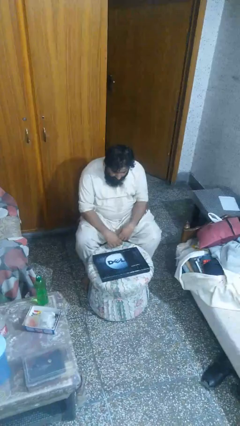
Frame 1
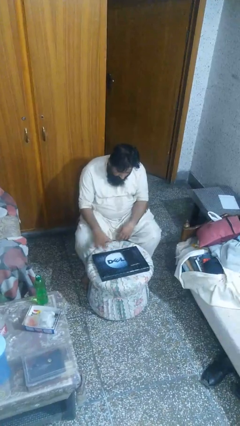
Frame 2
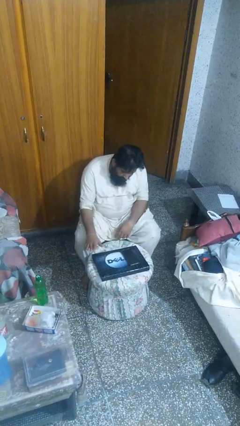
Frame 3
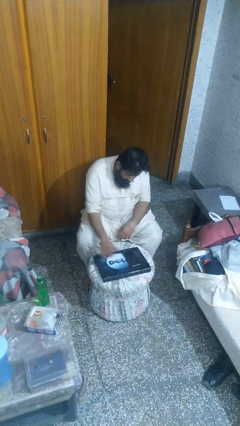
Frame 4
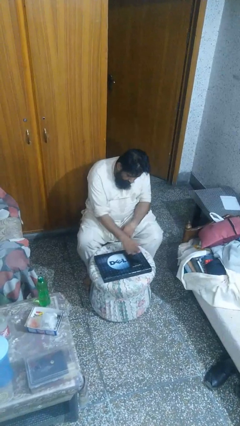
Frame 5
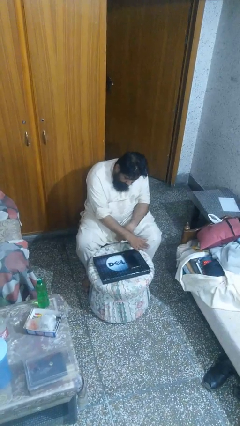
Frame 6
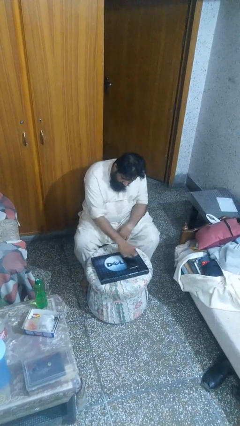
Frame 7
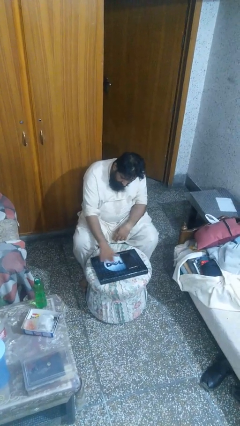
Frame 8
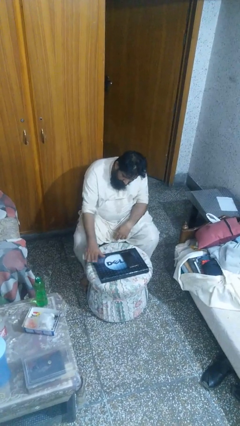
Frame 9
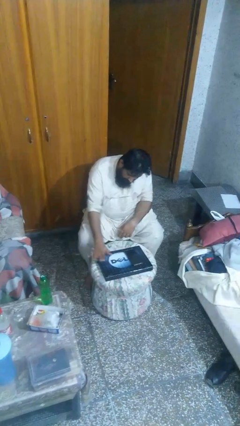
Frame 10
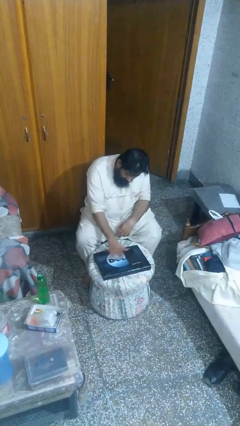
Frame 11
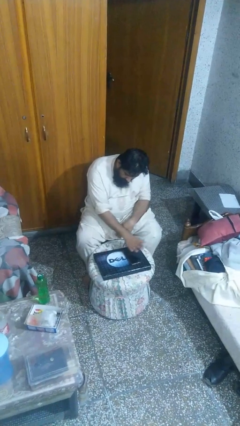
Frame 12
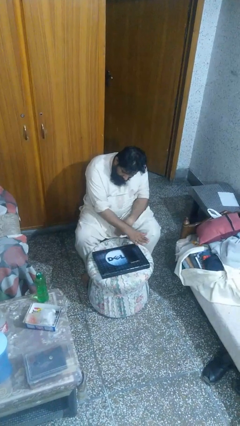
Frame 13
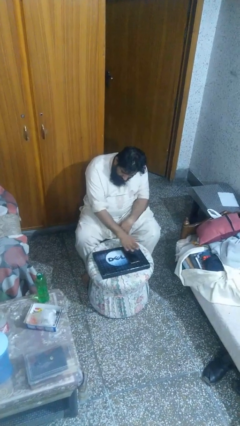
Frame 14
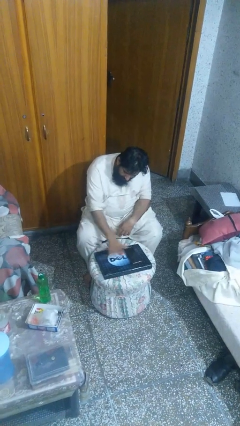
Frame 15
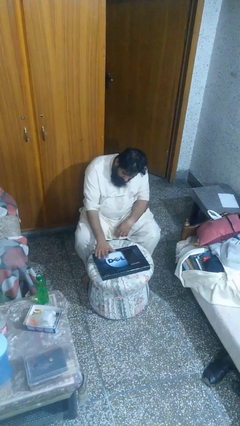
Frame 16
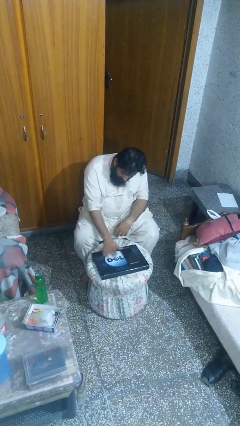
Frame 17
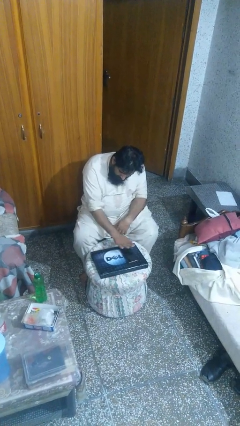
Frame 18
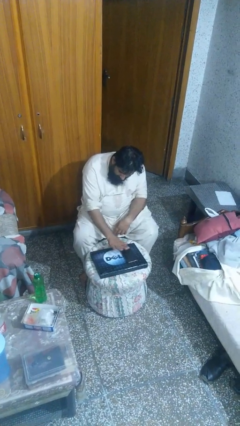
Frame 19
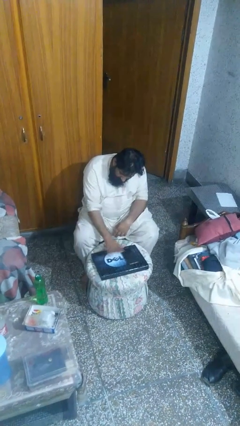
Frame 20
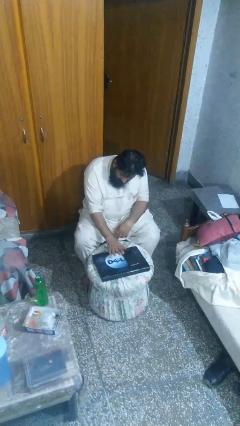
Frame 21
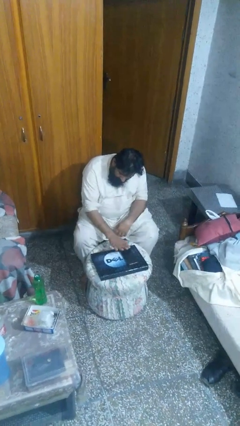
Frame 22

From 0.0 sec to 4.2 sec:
person waves hand over object

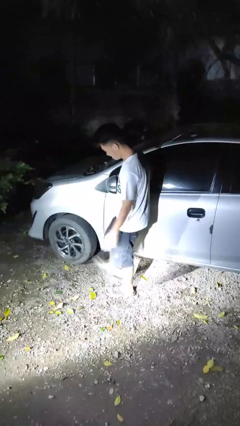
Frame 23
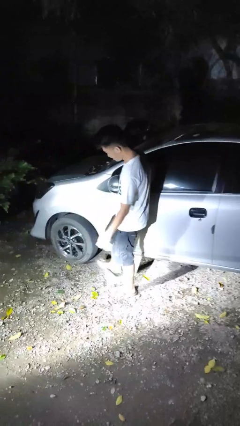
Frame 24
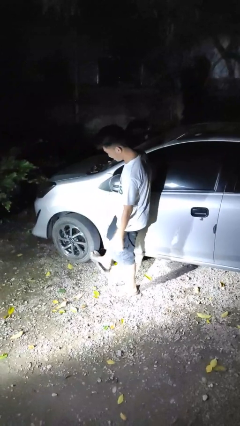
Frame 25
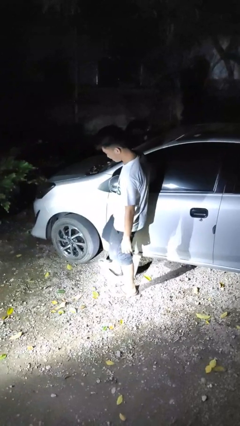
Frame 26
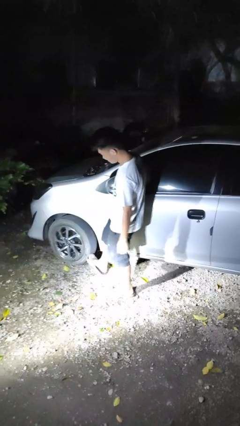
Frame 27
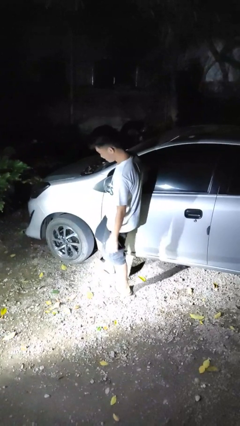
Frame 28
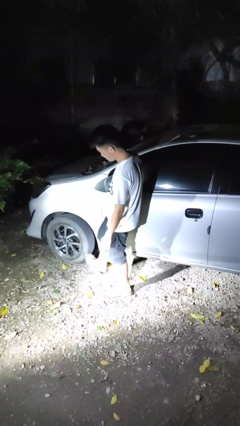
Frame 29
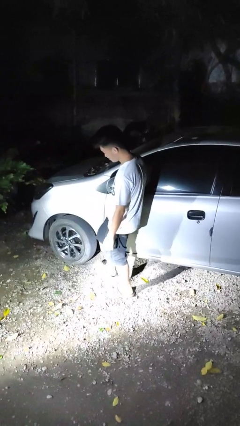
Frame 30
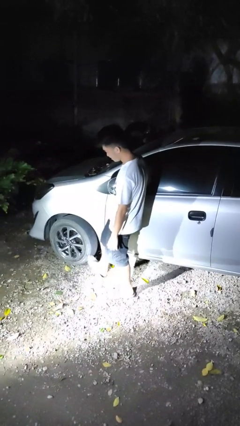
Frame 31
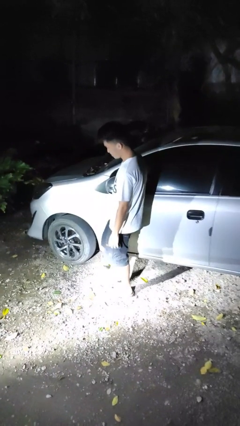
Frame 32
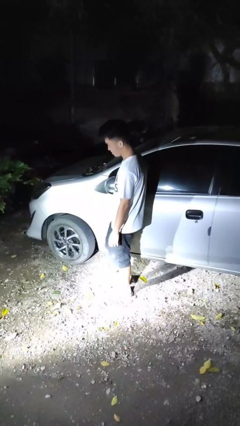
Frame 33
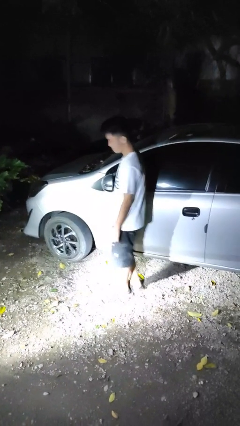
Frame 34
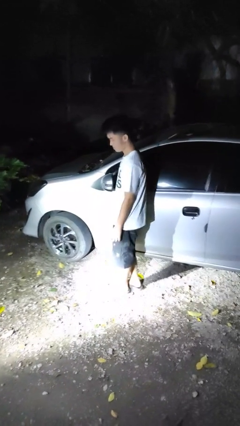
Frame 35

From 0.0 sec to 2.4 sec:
person kicks car tires

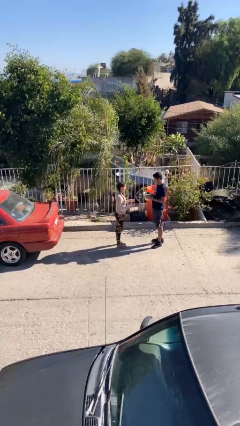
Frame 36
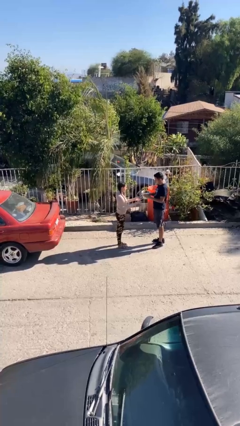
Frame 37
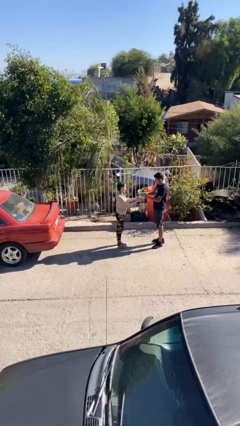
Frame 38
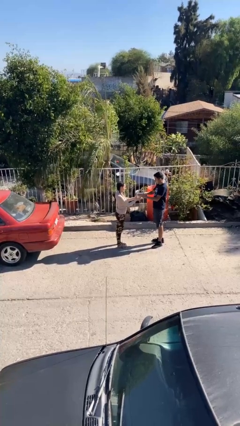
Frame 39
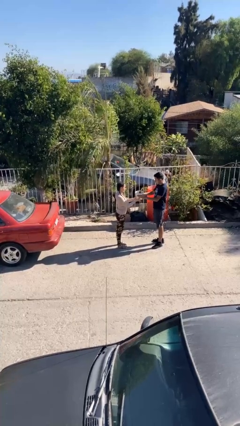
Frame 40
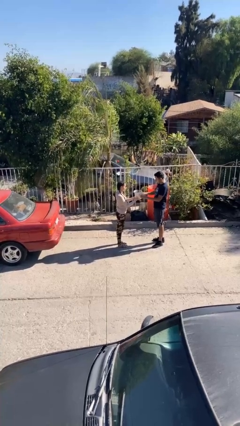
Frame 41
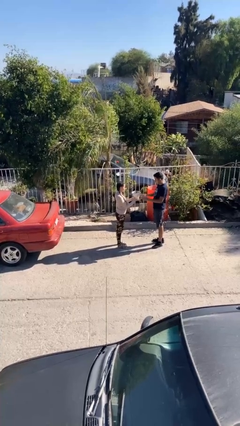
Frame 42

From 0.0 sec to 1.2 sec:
person transfers object to person

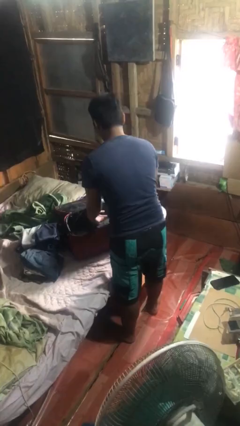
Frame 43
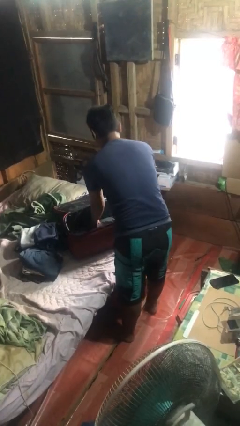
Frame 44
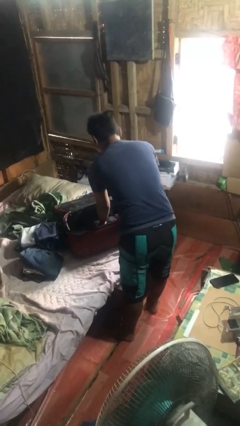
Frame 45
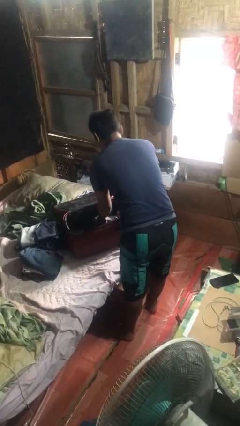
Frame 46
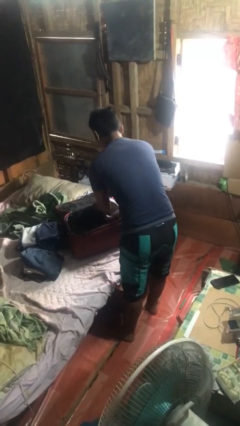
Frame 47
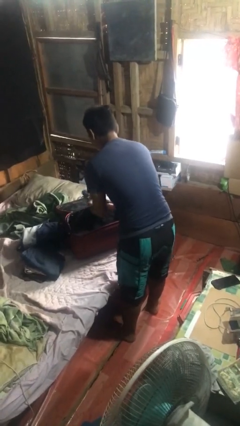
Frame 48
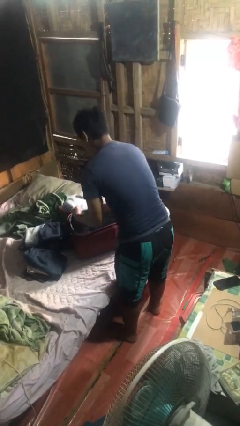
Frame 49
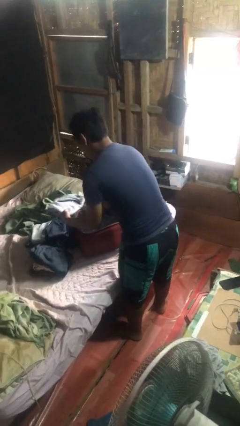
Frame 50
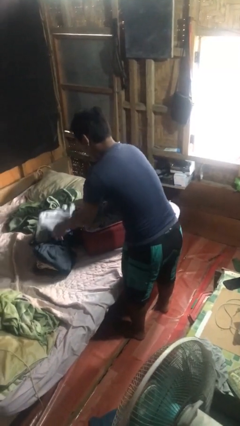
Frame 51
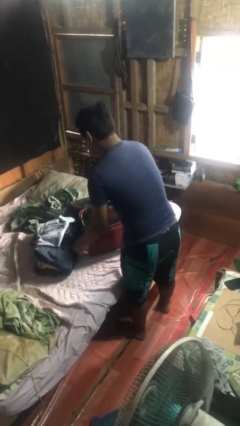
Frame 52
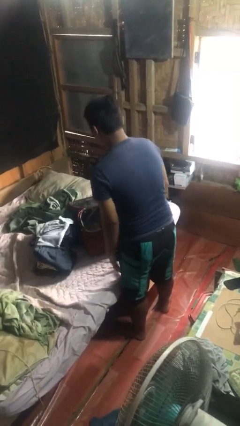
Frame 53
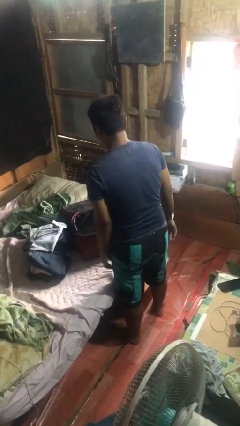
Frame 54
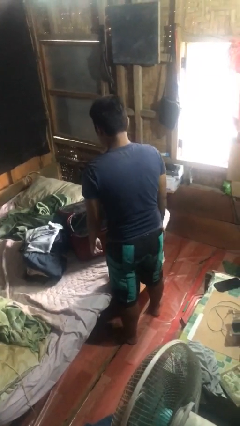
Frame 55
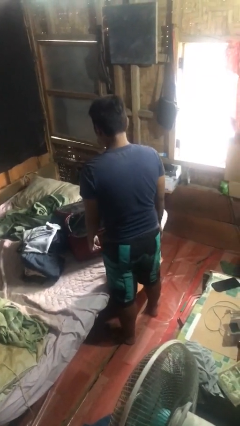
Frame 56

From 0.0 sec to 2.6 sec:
person unloads clothes from suitcase

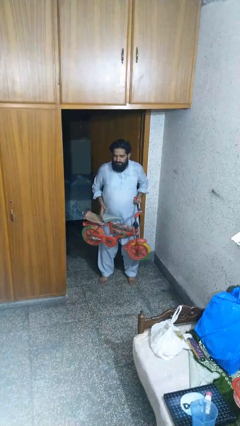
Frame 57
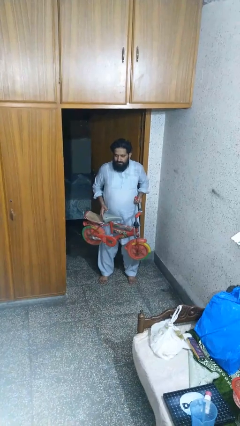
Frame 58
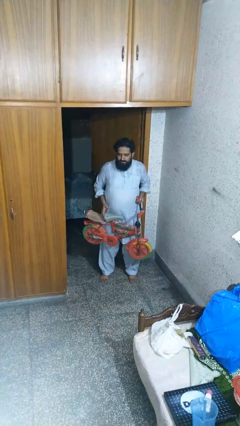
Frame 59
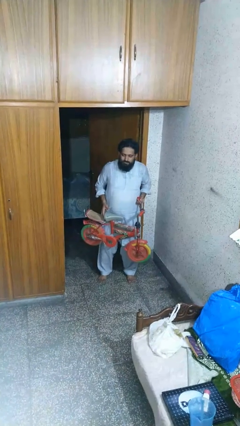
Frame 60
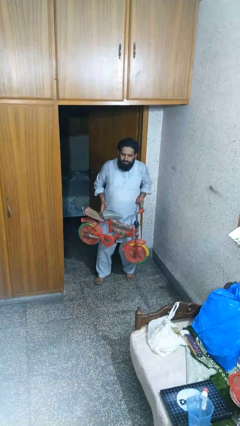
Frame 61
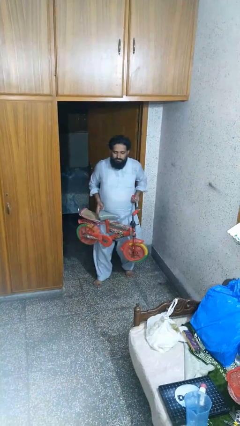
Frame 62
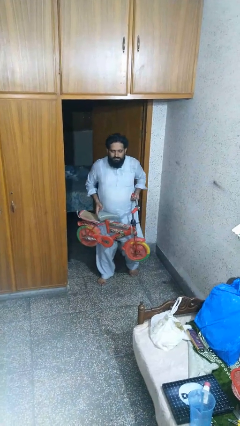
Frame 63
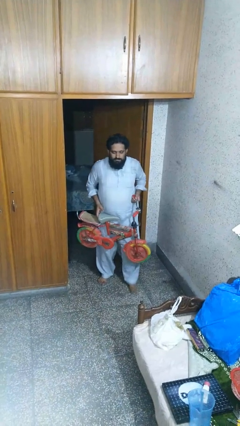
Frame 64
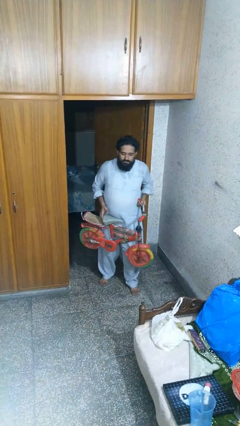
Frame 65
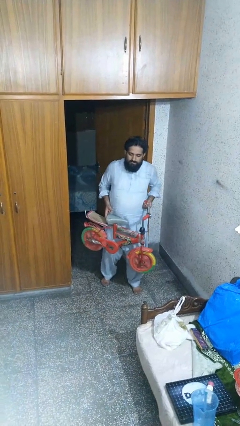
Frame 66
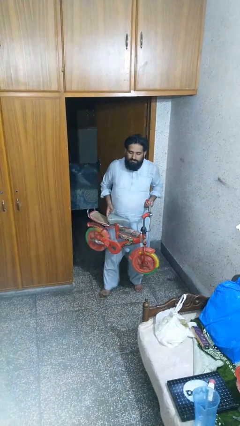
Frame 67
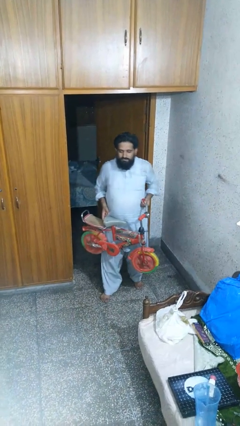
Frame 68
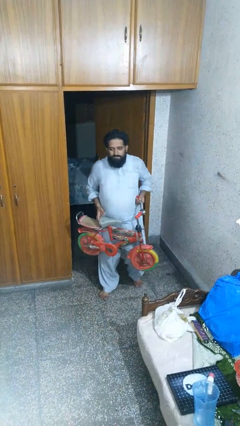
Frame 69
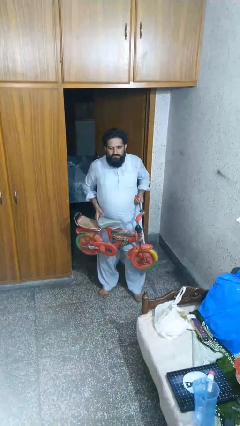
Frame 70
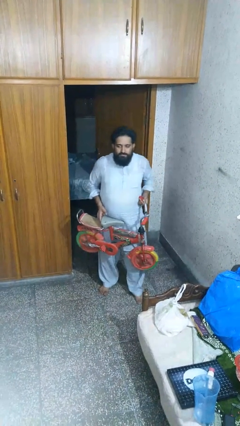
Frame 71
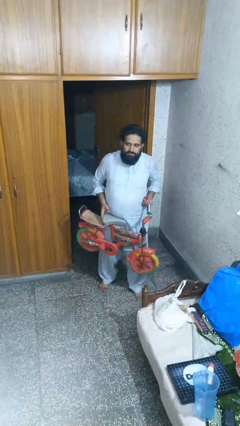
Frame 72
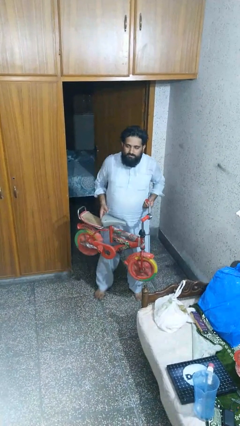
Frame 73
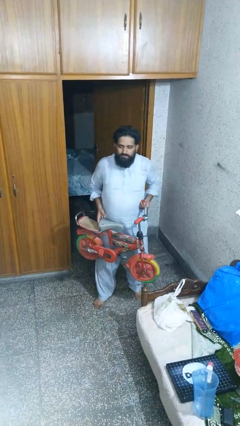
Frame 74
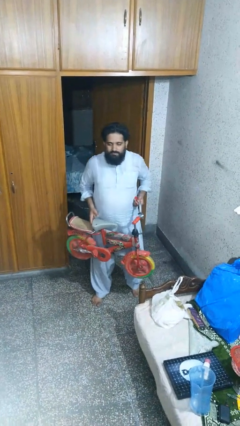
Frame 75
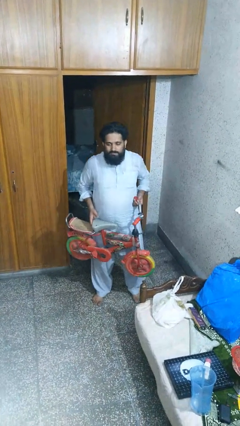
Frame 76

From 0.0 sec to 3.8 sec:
person carries bicycle

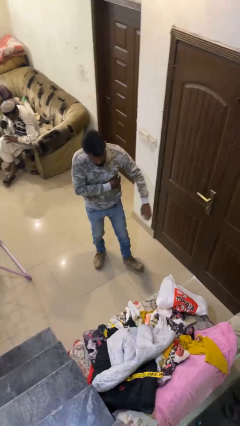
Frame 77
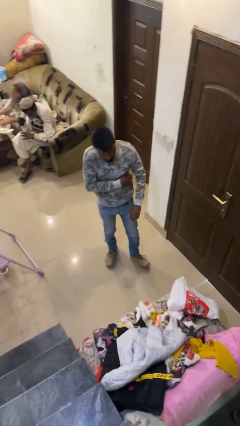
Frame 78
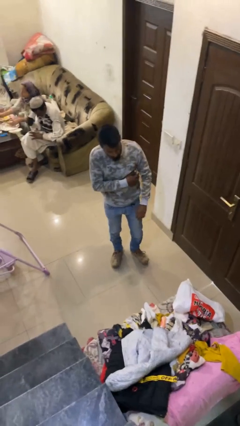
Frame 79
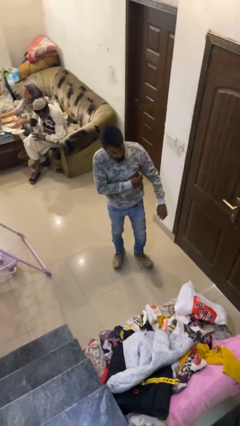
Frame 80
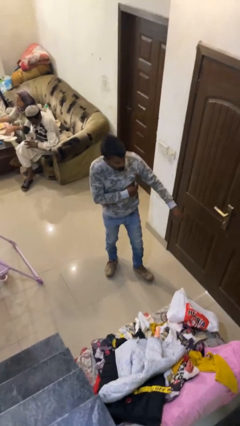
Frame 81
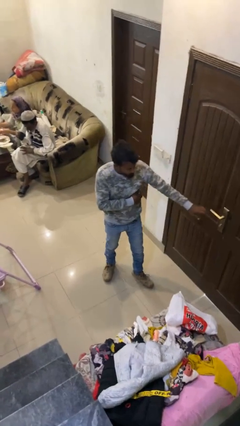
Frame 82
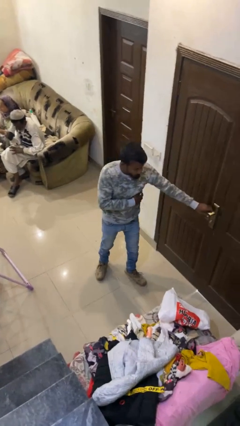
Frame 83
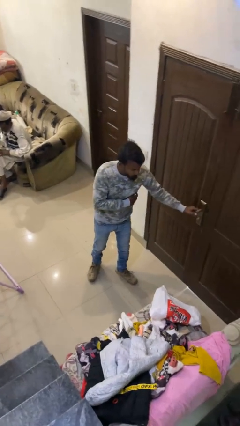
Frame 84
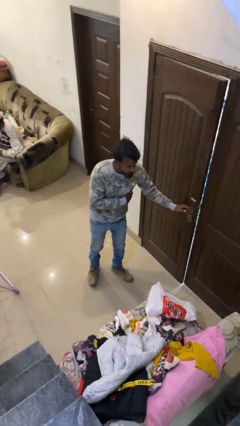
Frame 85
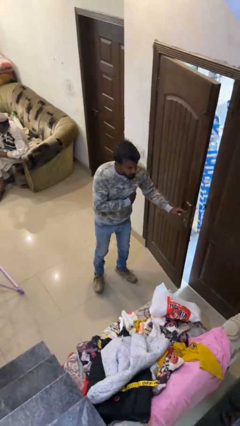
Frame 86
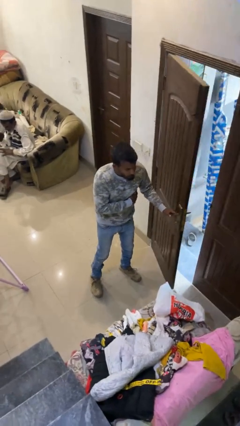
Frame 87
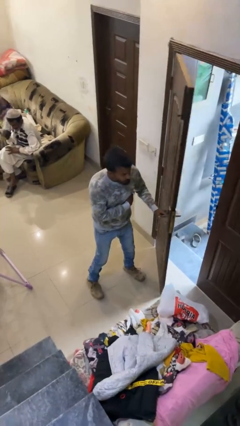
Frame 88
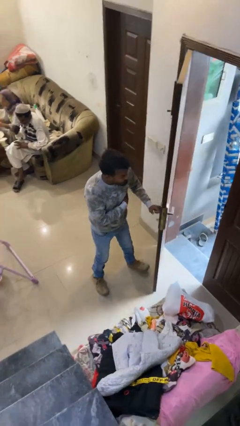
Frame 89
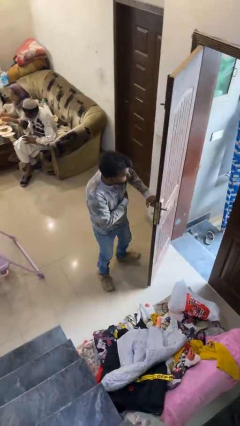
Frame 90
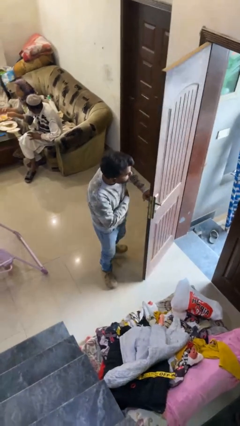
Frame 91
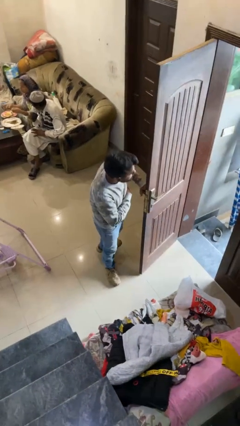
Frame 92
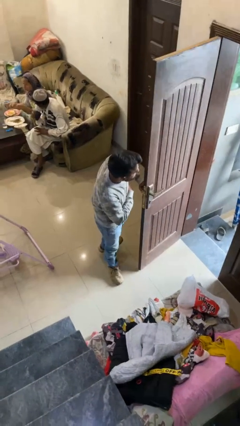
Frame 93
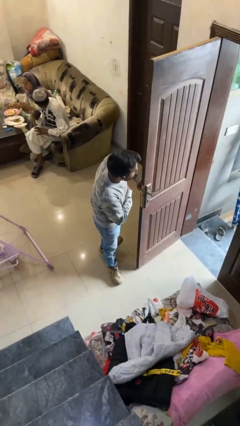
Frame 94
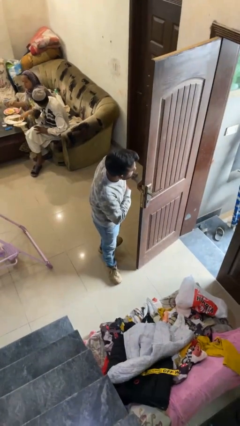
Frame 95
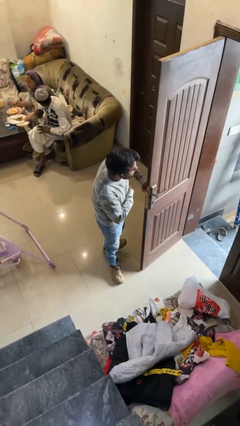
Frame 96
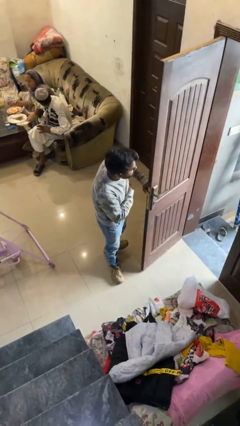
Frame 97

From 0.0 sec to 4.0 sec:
person opens facility door
